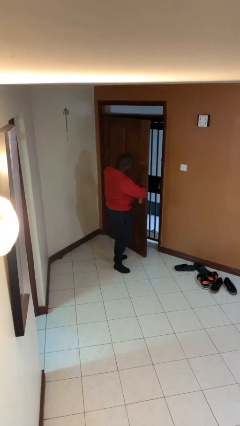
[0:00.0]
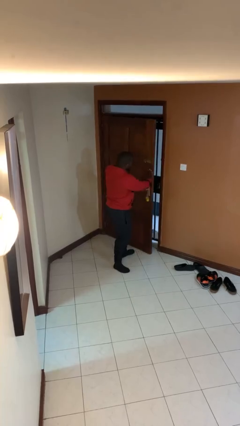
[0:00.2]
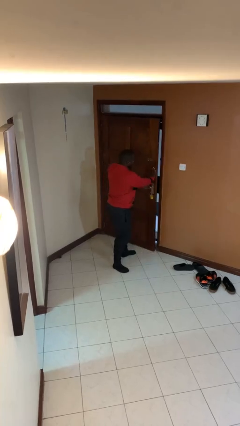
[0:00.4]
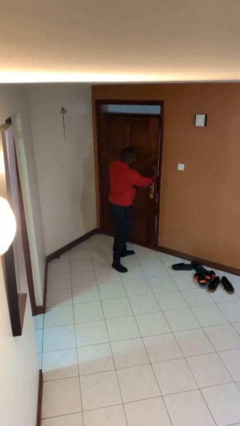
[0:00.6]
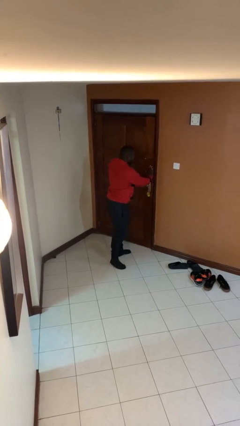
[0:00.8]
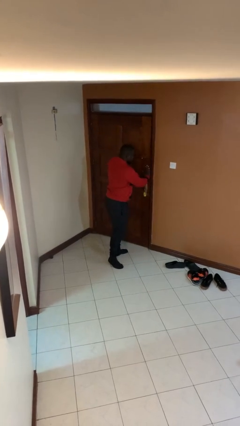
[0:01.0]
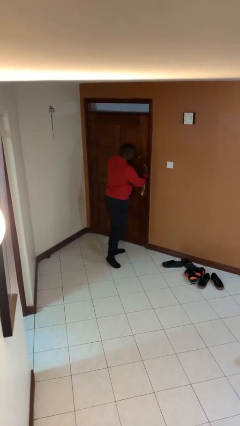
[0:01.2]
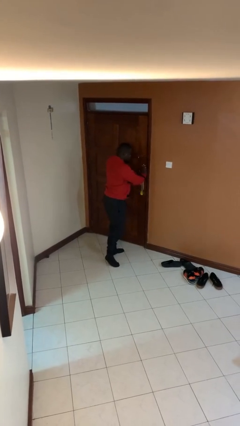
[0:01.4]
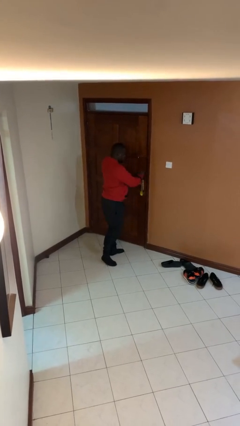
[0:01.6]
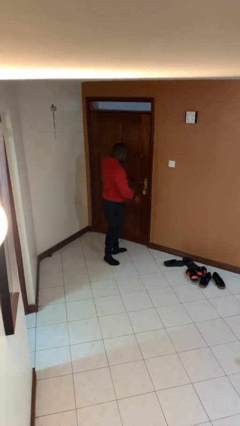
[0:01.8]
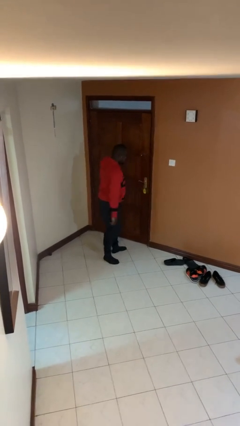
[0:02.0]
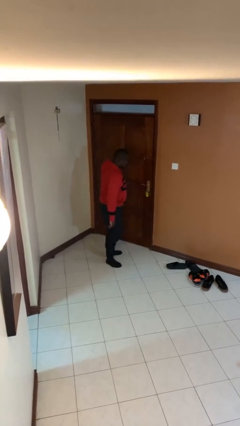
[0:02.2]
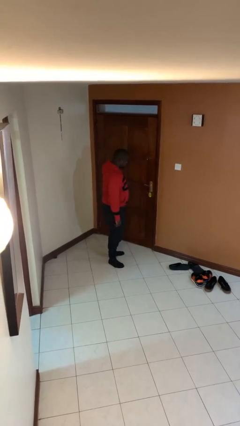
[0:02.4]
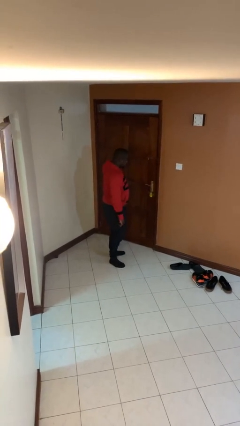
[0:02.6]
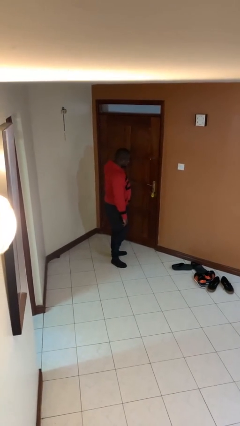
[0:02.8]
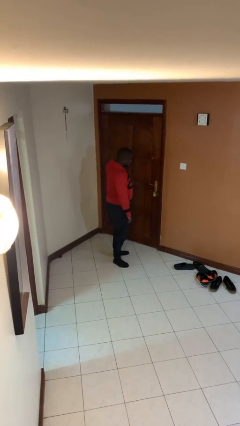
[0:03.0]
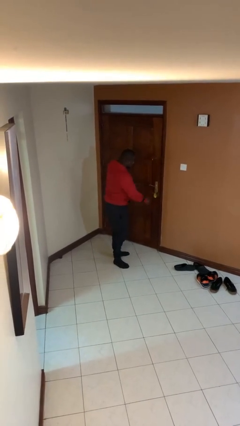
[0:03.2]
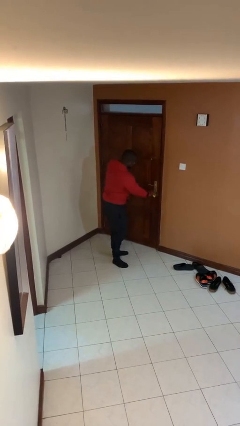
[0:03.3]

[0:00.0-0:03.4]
person closes facility door

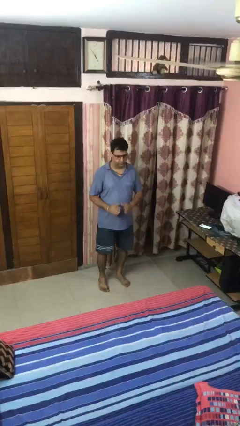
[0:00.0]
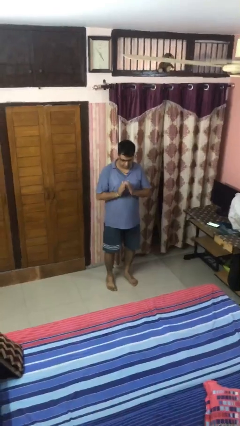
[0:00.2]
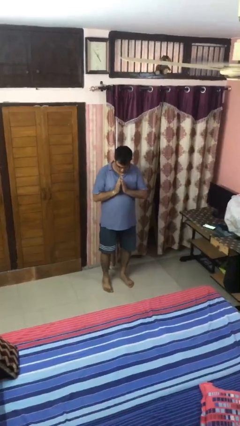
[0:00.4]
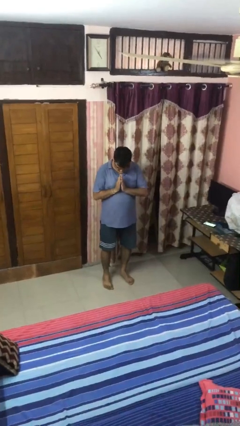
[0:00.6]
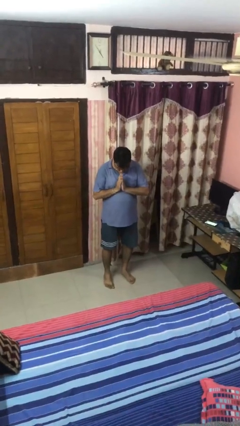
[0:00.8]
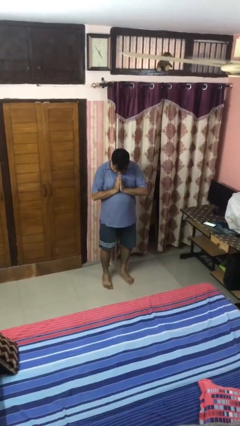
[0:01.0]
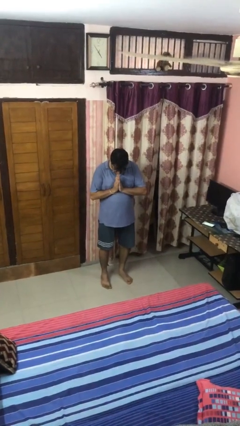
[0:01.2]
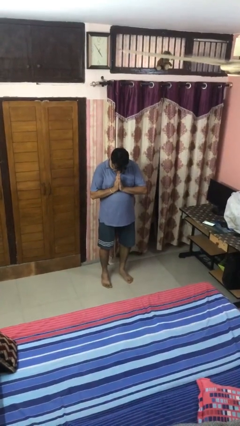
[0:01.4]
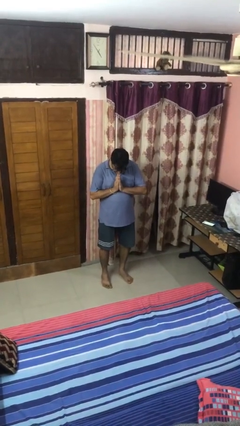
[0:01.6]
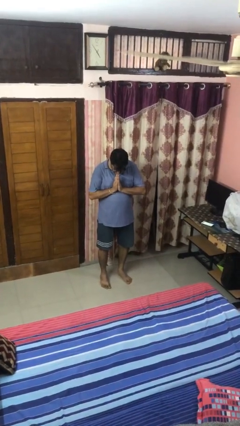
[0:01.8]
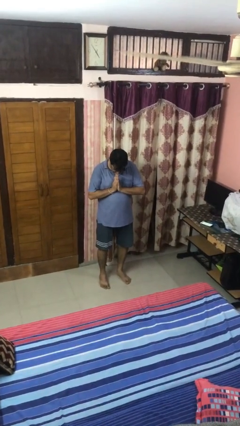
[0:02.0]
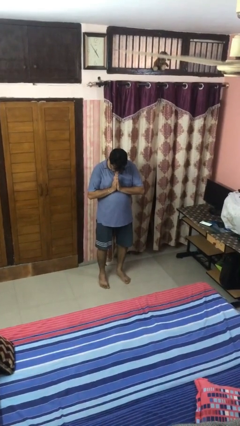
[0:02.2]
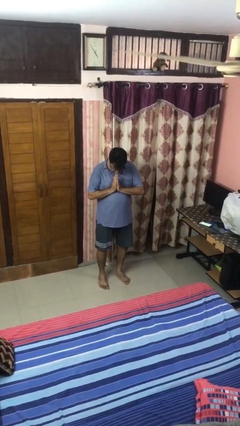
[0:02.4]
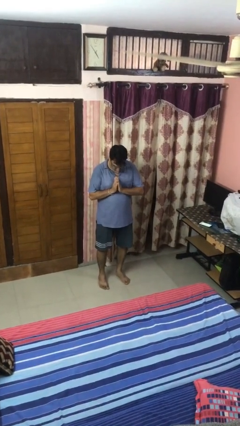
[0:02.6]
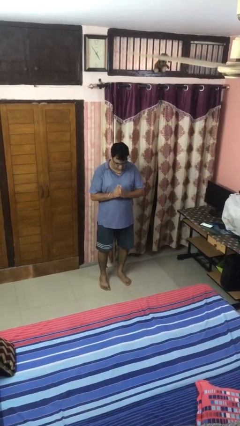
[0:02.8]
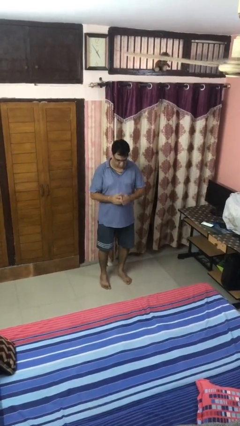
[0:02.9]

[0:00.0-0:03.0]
person prays

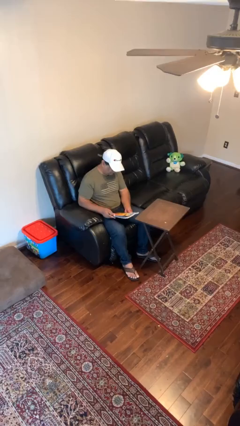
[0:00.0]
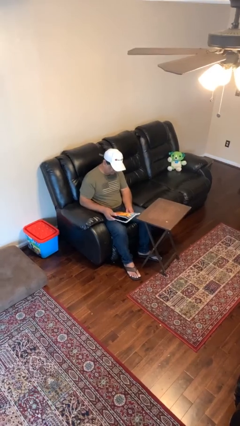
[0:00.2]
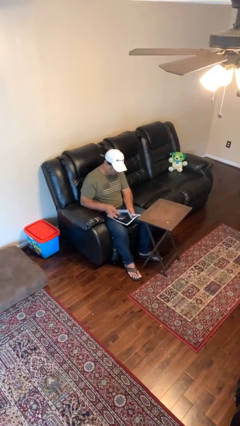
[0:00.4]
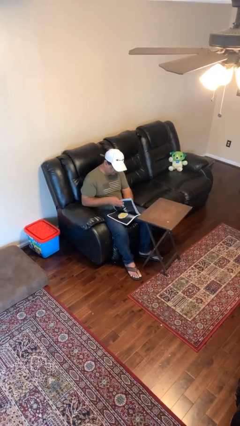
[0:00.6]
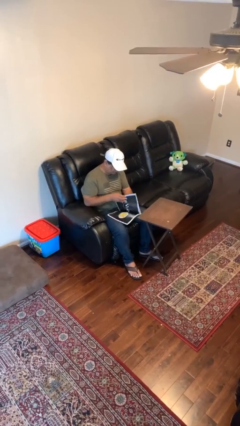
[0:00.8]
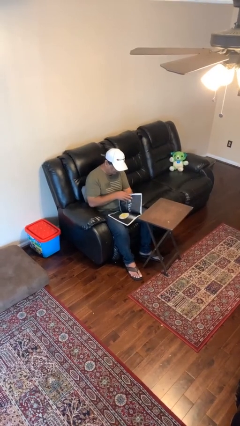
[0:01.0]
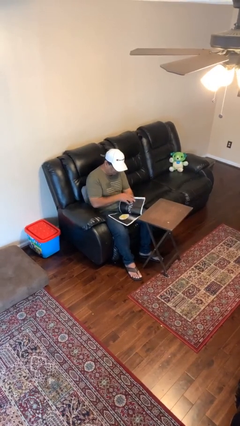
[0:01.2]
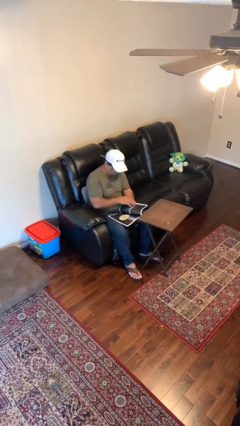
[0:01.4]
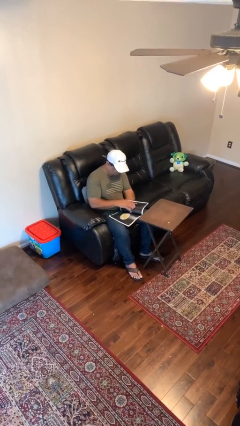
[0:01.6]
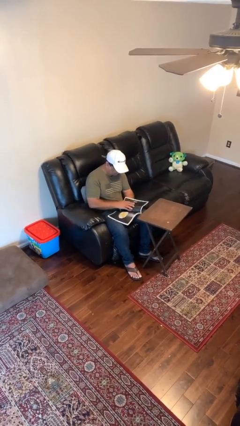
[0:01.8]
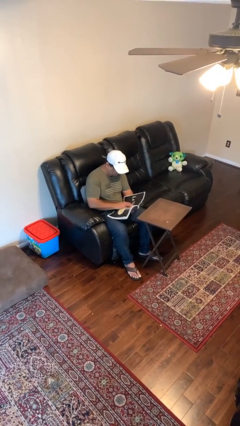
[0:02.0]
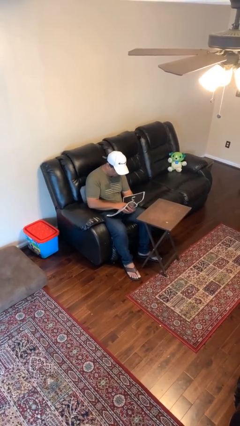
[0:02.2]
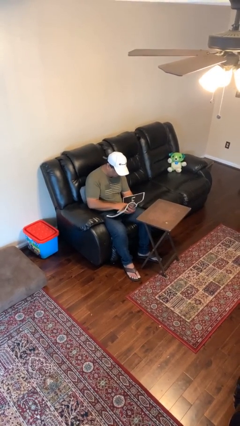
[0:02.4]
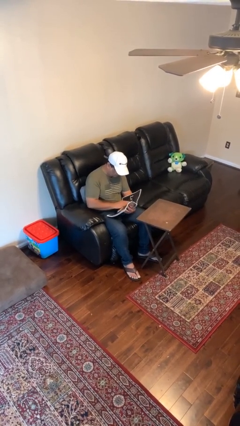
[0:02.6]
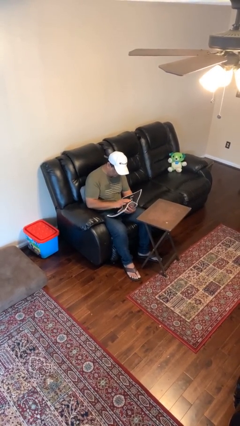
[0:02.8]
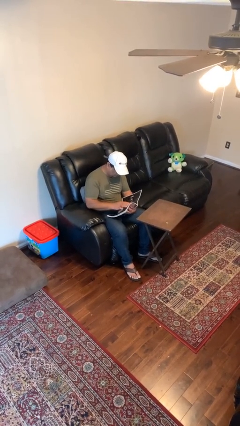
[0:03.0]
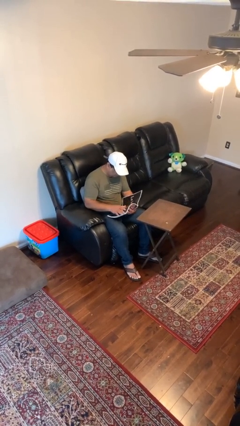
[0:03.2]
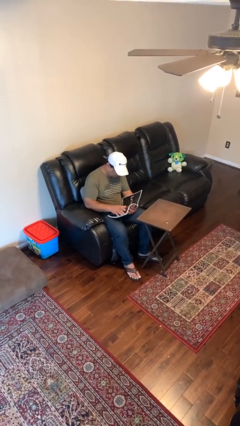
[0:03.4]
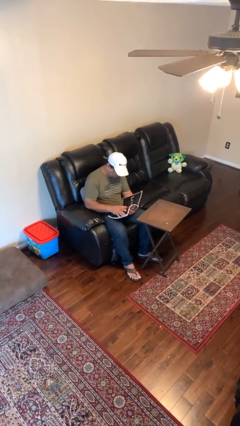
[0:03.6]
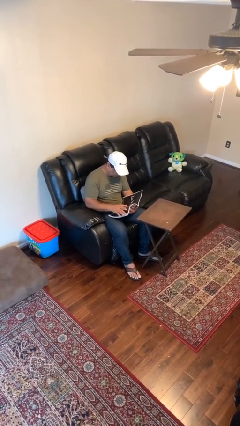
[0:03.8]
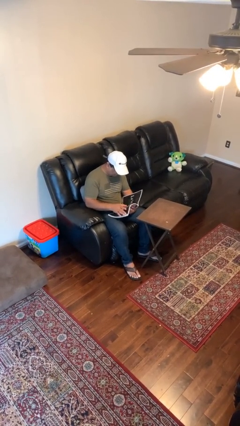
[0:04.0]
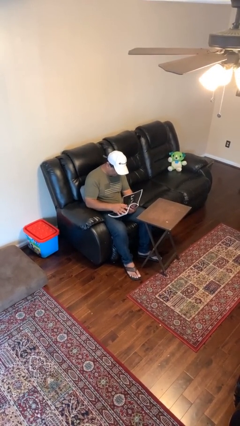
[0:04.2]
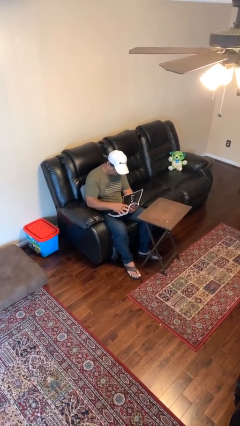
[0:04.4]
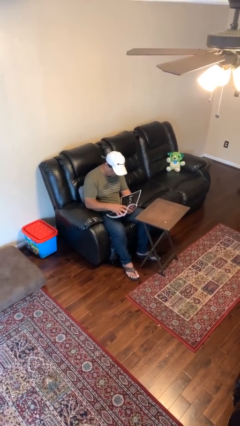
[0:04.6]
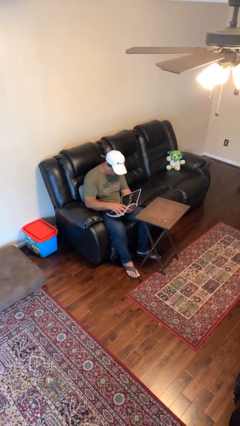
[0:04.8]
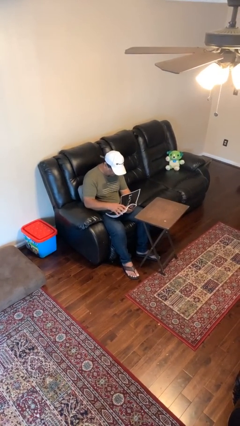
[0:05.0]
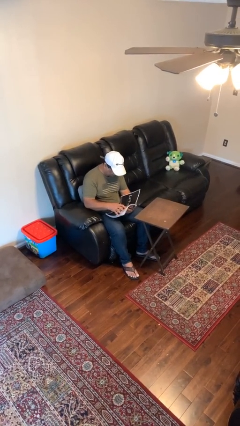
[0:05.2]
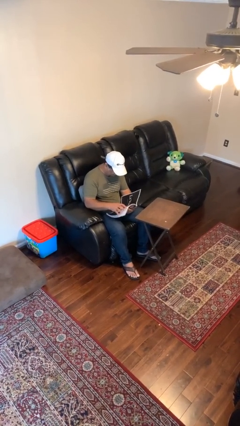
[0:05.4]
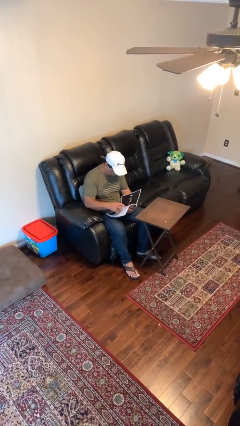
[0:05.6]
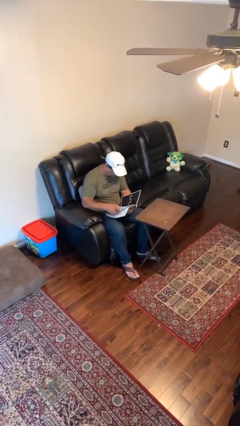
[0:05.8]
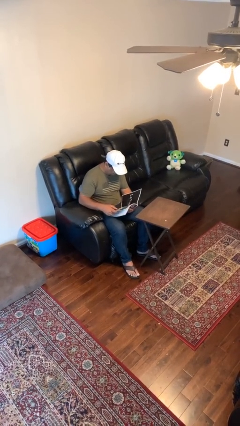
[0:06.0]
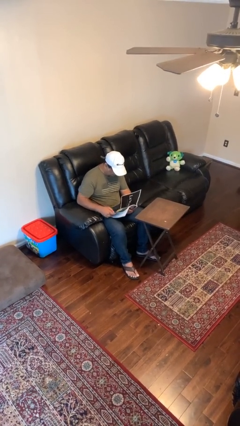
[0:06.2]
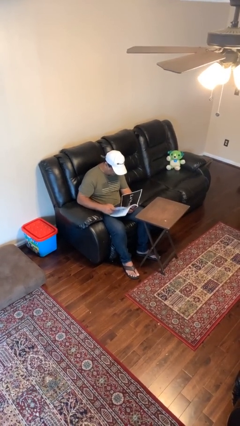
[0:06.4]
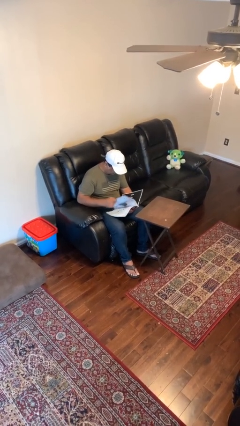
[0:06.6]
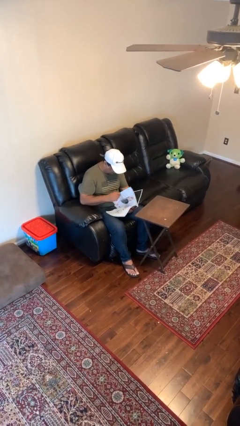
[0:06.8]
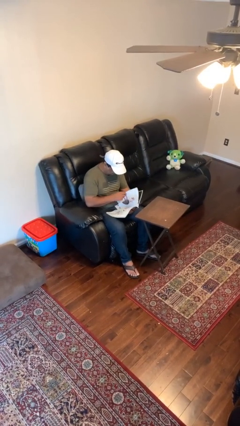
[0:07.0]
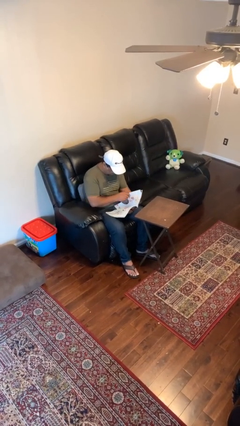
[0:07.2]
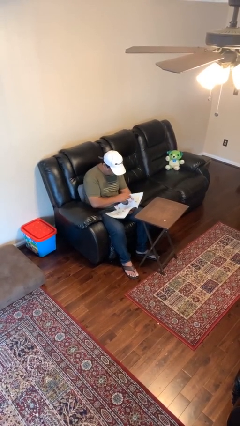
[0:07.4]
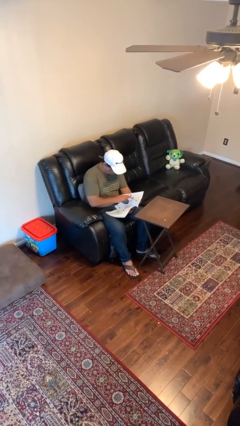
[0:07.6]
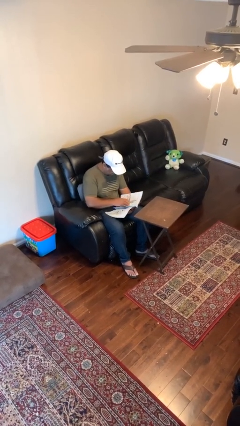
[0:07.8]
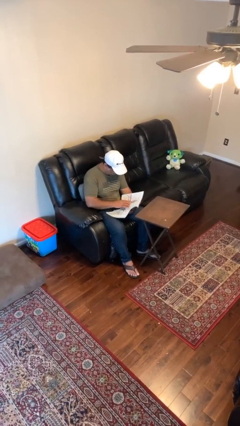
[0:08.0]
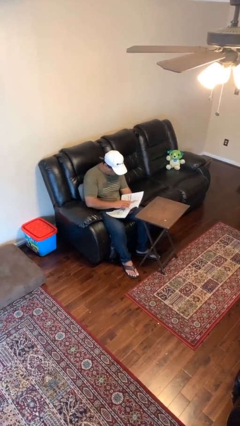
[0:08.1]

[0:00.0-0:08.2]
person reads document

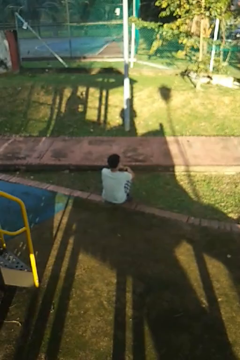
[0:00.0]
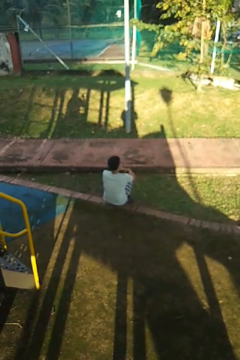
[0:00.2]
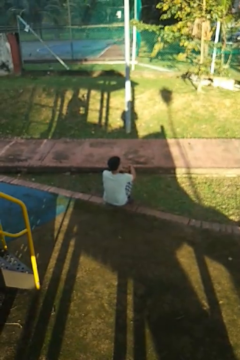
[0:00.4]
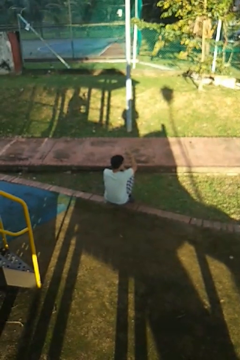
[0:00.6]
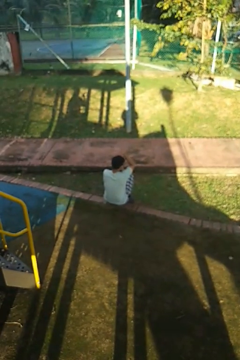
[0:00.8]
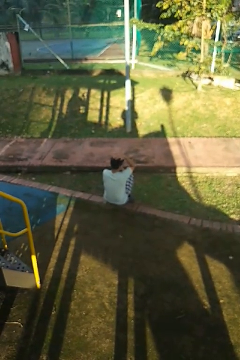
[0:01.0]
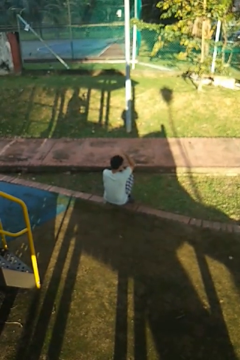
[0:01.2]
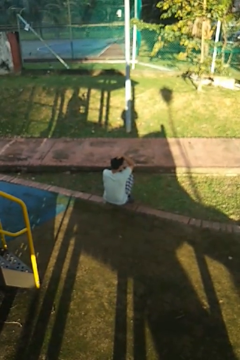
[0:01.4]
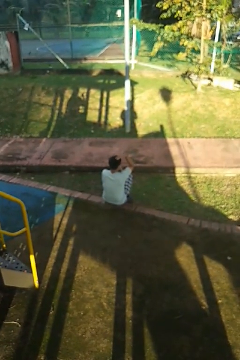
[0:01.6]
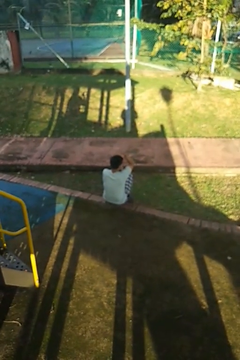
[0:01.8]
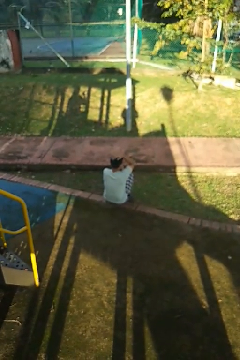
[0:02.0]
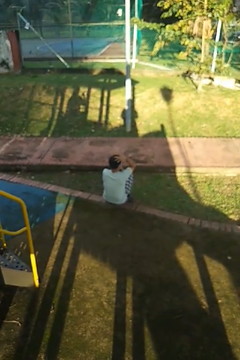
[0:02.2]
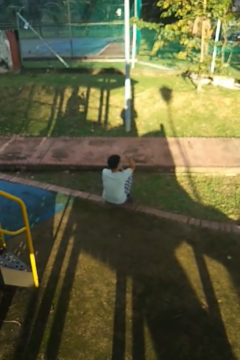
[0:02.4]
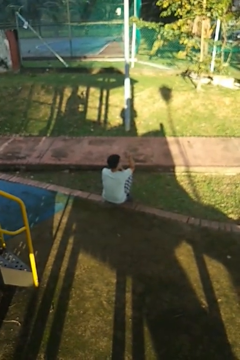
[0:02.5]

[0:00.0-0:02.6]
person pats head

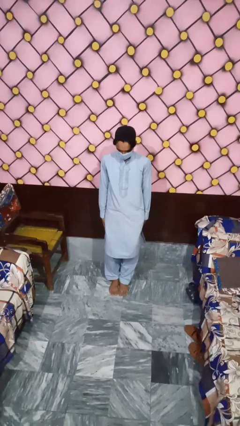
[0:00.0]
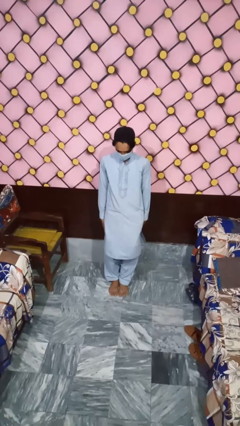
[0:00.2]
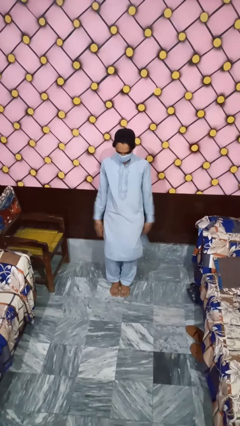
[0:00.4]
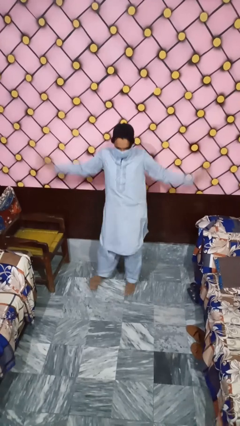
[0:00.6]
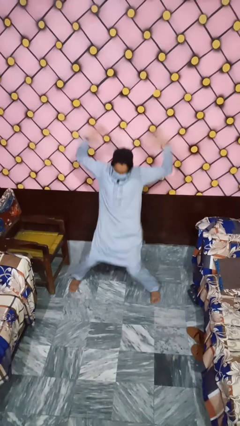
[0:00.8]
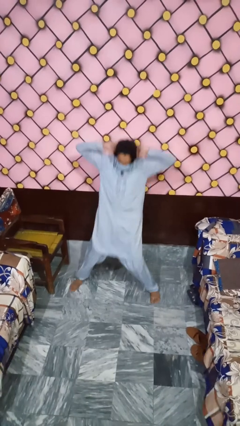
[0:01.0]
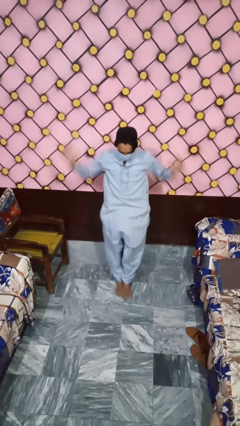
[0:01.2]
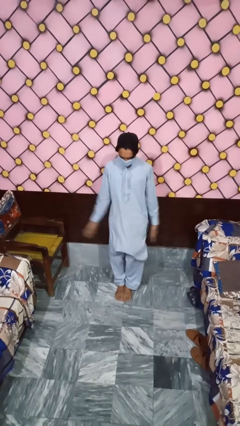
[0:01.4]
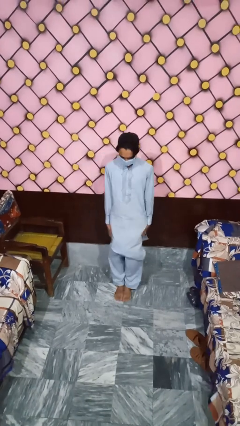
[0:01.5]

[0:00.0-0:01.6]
person exercises with jumping jacks
